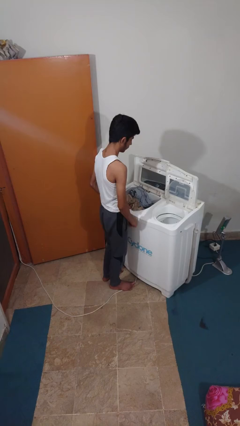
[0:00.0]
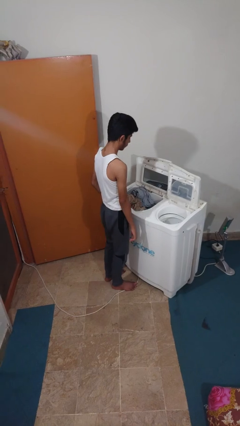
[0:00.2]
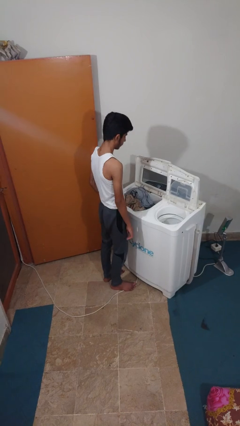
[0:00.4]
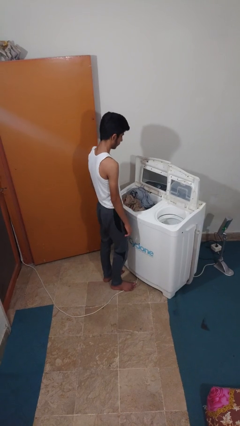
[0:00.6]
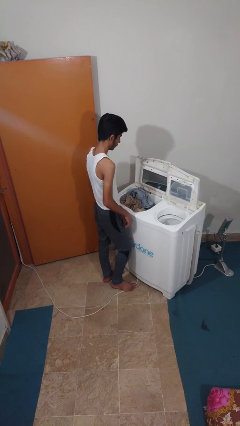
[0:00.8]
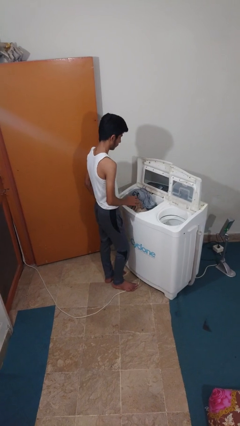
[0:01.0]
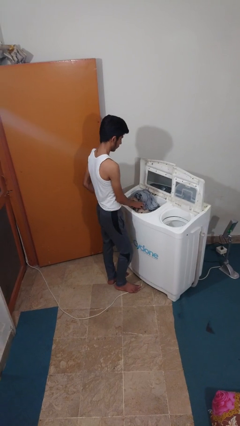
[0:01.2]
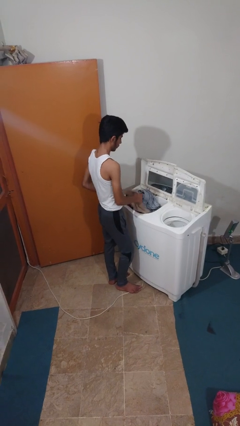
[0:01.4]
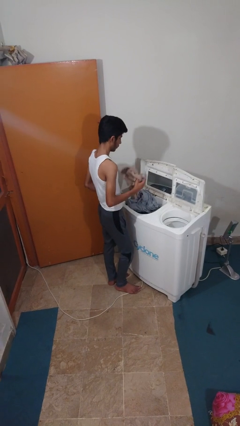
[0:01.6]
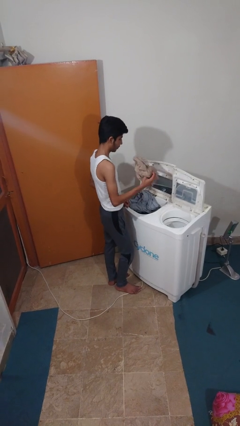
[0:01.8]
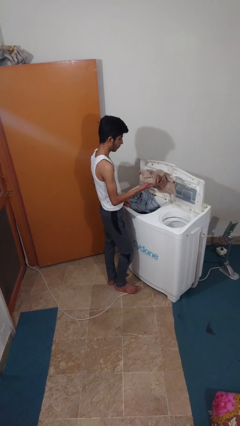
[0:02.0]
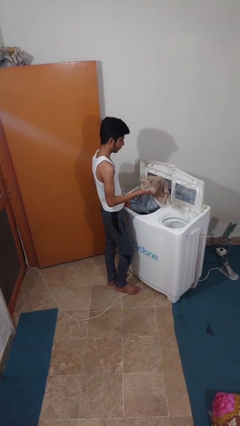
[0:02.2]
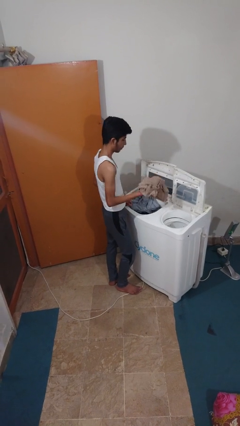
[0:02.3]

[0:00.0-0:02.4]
person unloads clotheswasher

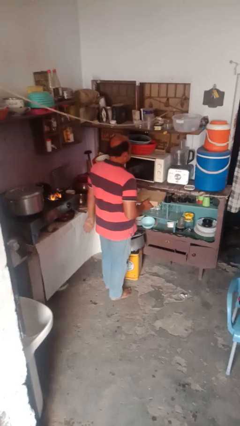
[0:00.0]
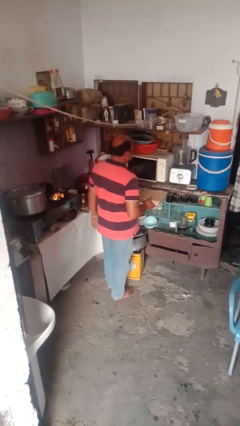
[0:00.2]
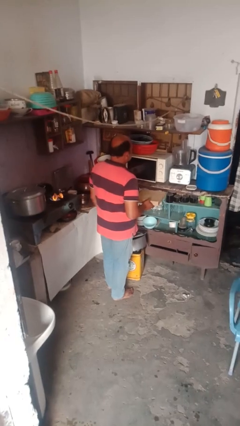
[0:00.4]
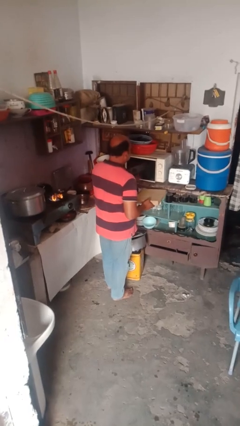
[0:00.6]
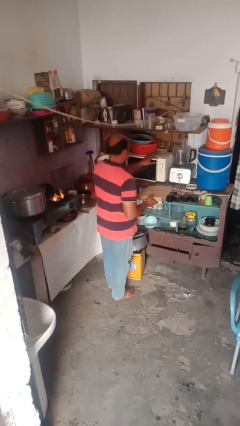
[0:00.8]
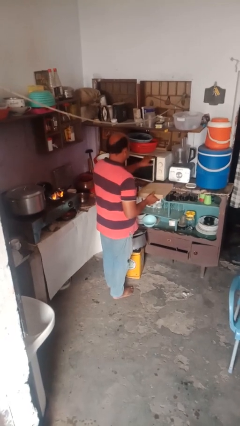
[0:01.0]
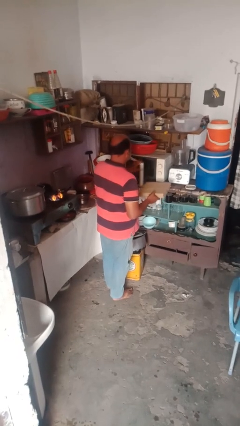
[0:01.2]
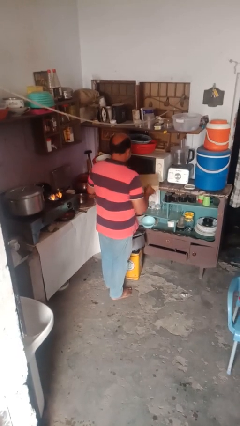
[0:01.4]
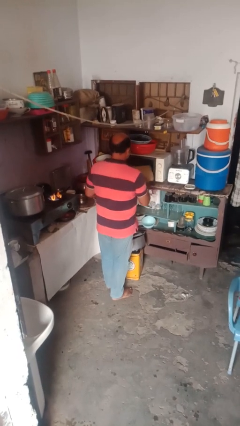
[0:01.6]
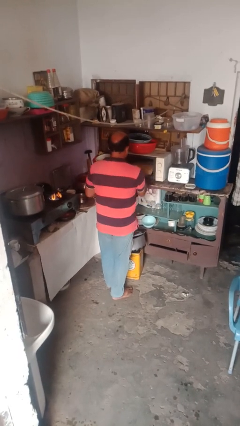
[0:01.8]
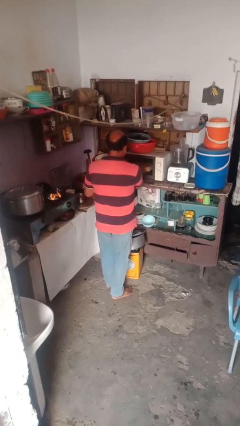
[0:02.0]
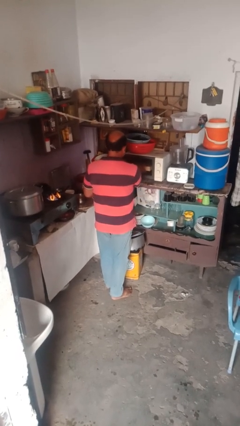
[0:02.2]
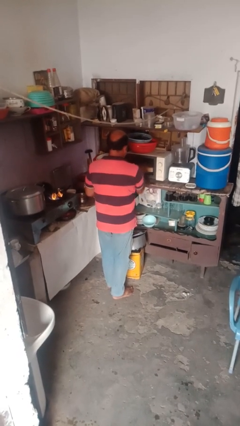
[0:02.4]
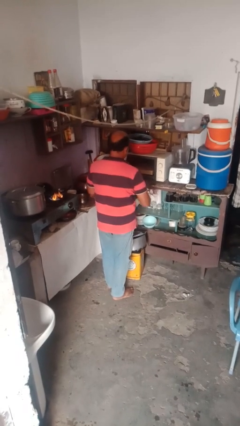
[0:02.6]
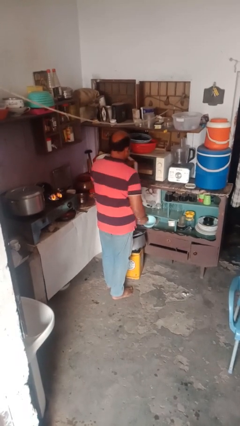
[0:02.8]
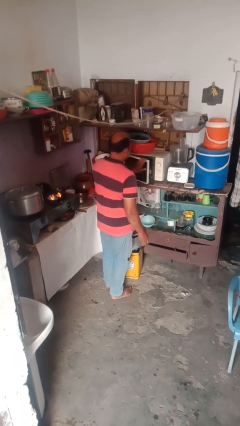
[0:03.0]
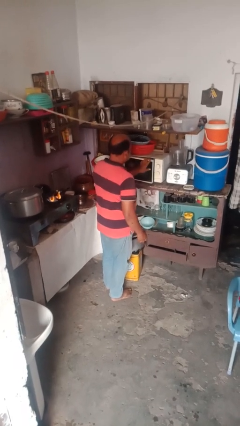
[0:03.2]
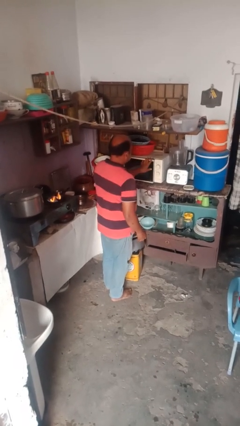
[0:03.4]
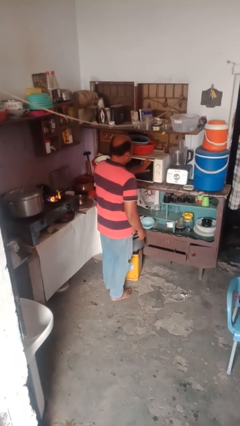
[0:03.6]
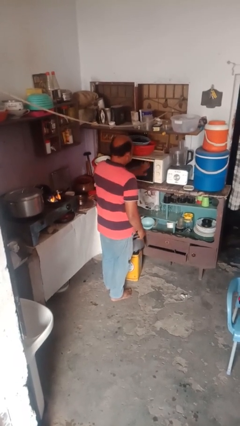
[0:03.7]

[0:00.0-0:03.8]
person puts object into microwave

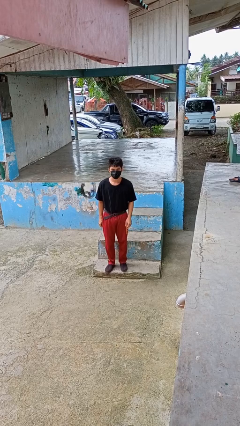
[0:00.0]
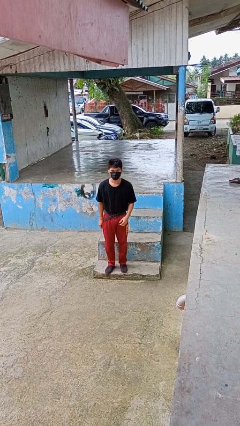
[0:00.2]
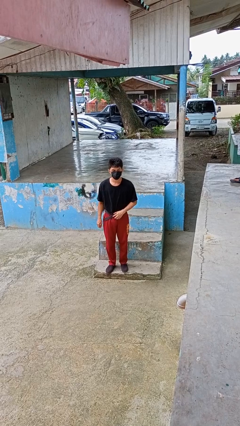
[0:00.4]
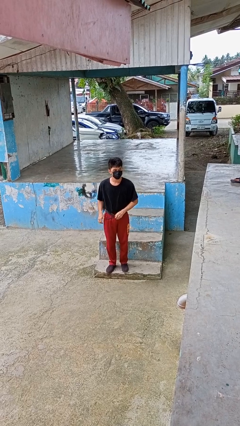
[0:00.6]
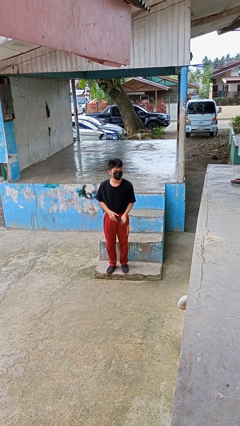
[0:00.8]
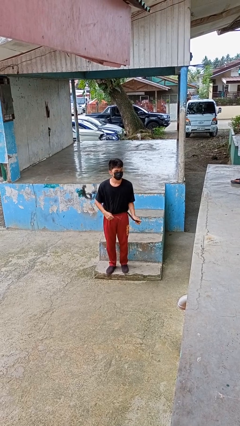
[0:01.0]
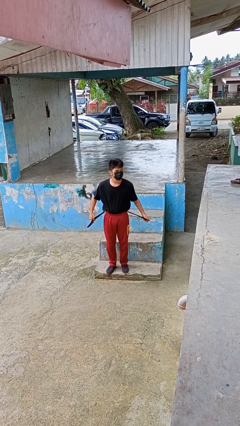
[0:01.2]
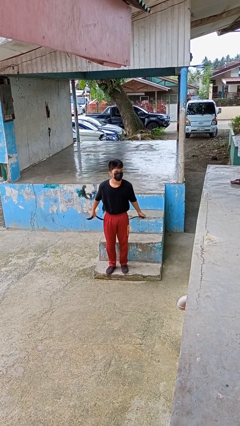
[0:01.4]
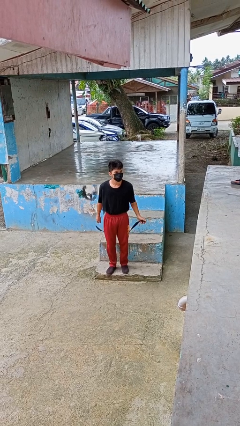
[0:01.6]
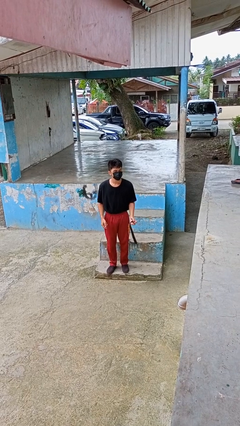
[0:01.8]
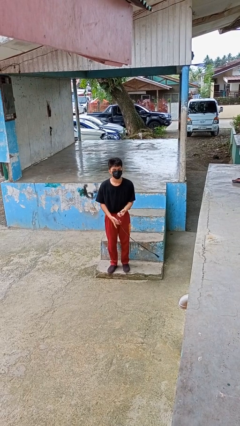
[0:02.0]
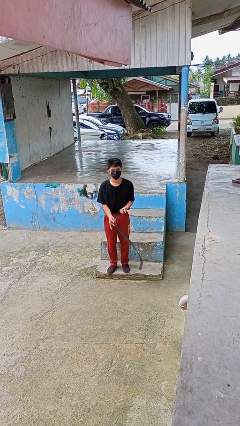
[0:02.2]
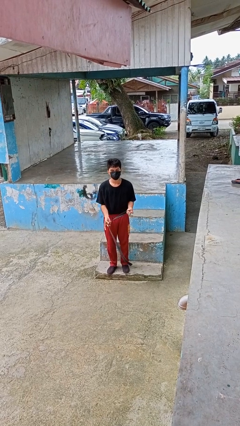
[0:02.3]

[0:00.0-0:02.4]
person takes off belt

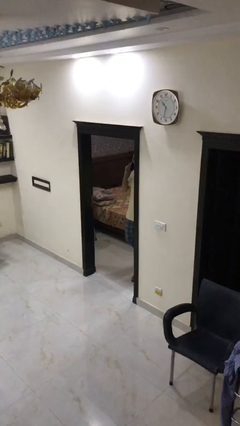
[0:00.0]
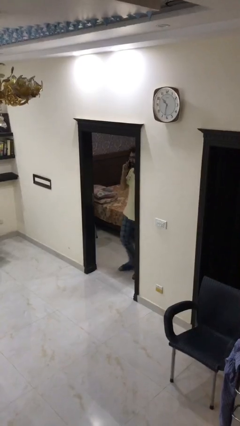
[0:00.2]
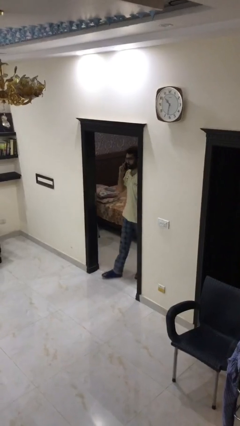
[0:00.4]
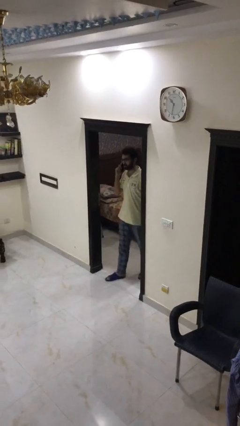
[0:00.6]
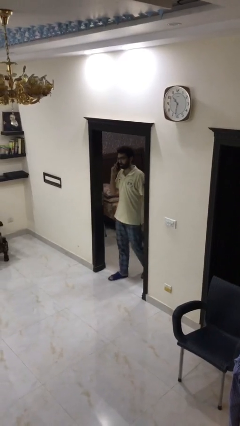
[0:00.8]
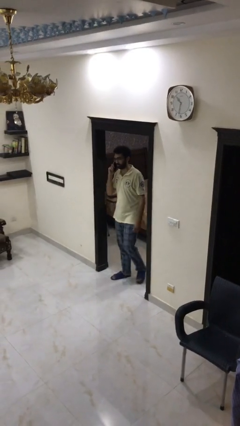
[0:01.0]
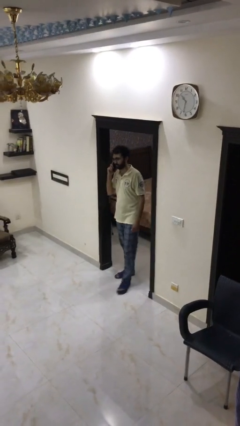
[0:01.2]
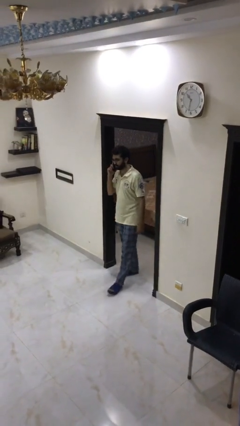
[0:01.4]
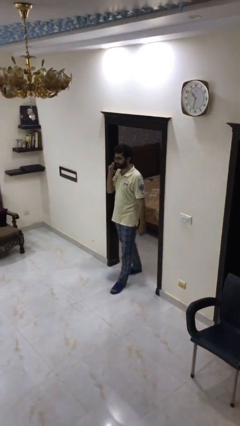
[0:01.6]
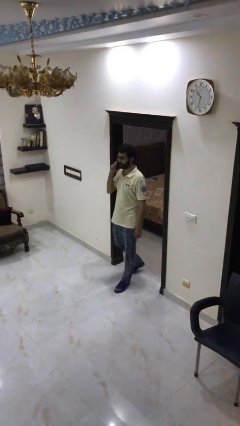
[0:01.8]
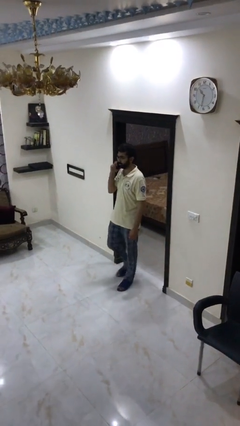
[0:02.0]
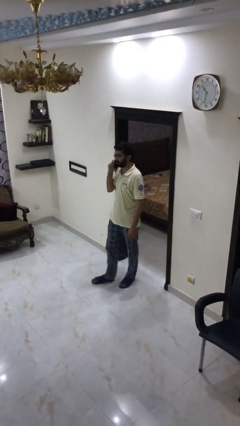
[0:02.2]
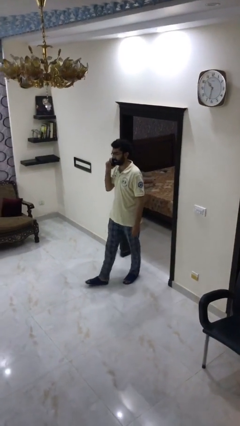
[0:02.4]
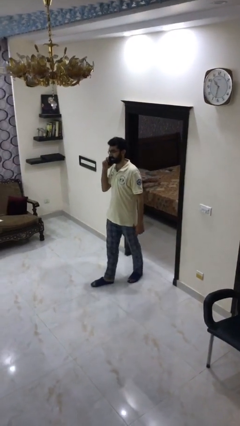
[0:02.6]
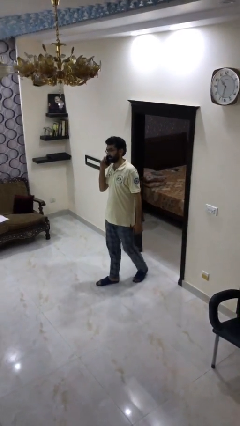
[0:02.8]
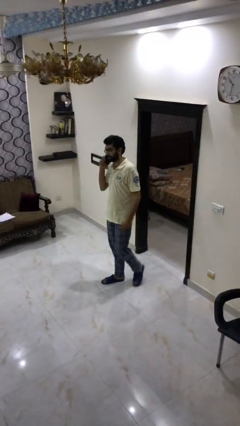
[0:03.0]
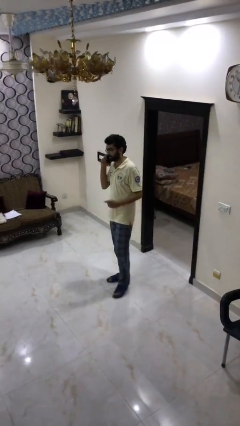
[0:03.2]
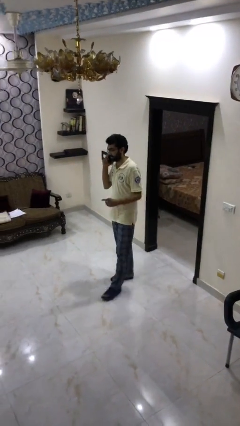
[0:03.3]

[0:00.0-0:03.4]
person enters scene through structure

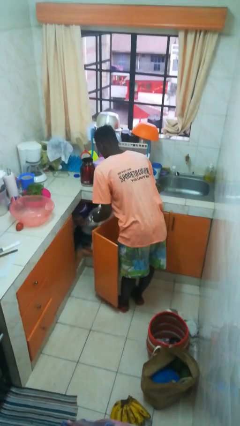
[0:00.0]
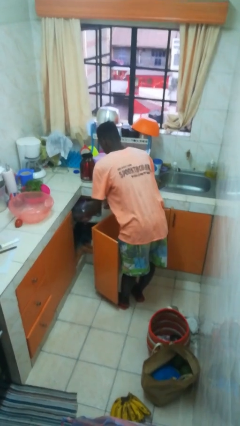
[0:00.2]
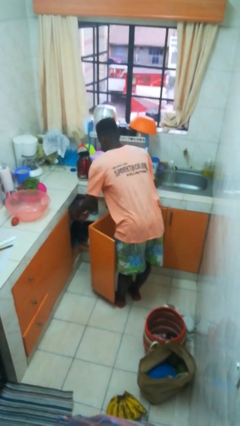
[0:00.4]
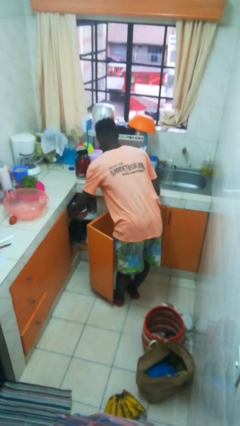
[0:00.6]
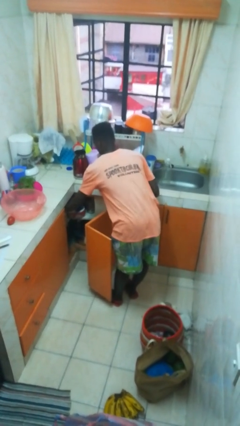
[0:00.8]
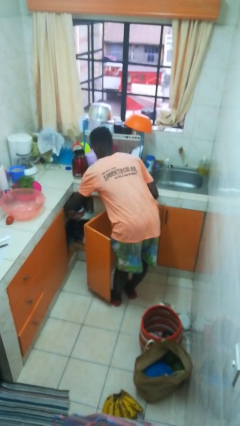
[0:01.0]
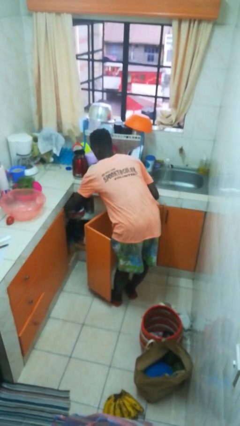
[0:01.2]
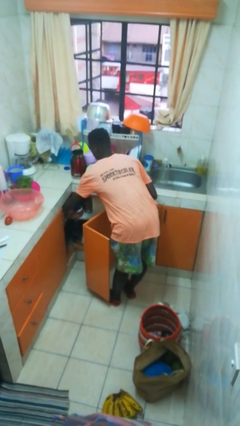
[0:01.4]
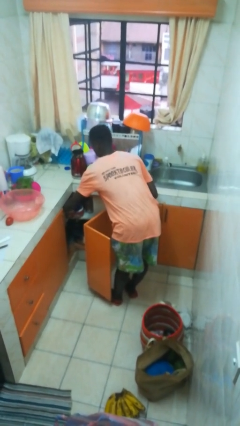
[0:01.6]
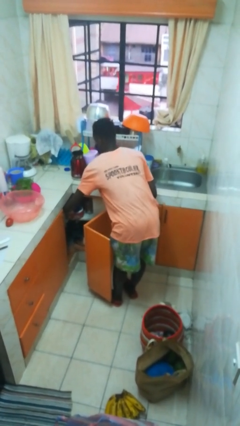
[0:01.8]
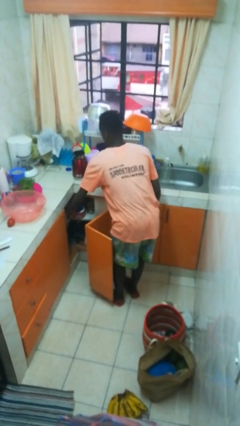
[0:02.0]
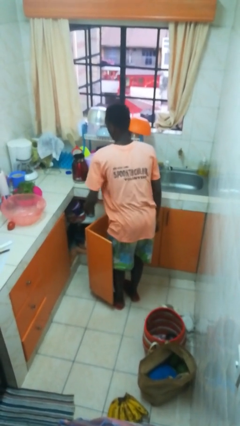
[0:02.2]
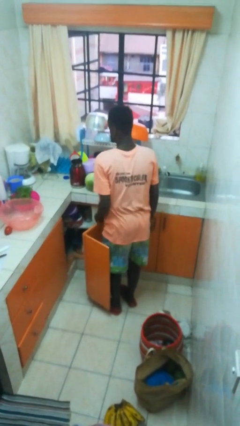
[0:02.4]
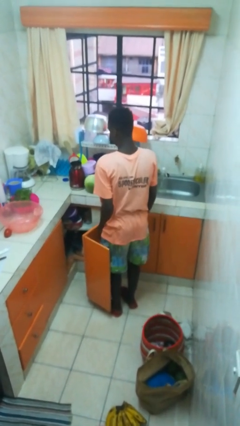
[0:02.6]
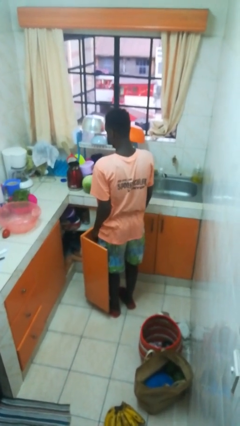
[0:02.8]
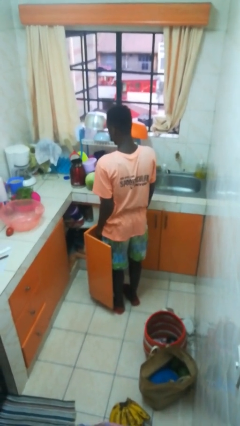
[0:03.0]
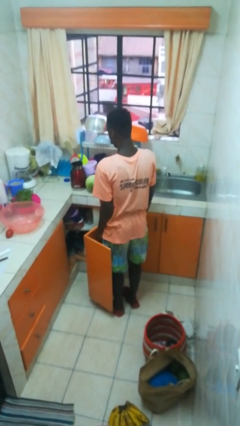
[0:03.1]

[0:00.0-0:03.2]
person puts object in cabinet

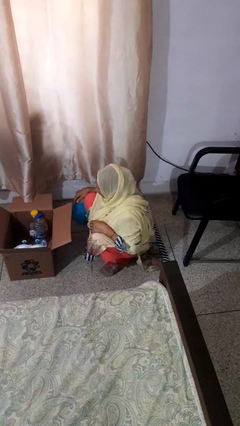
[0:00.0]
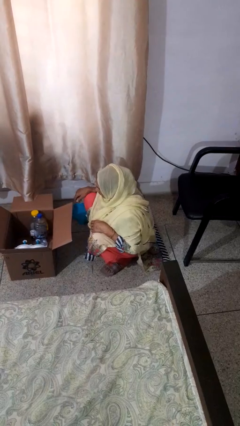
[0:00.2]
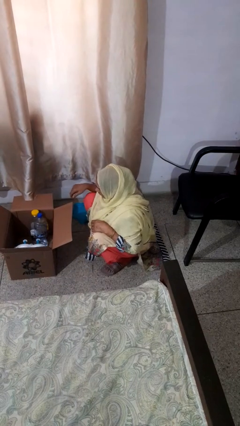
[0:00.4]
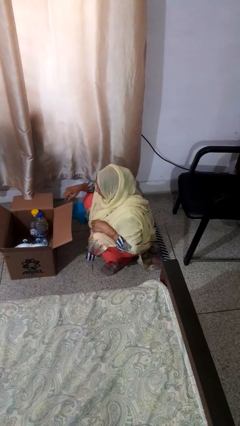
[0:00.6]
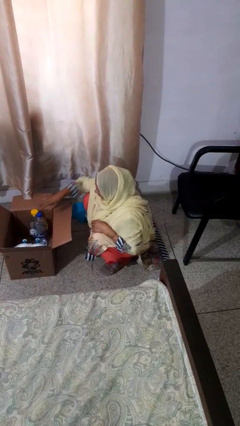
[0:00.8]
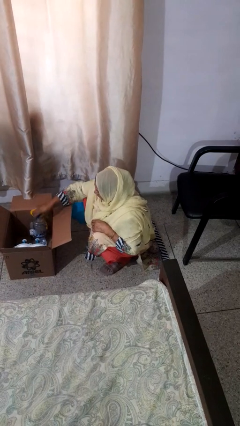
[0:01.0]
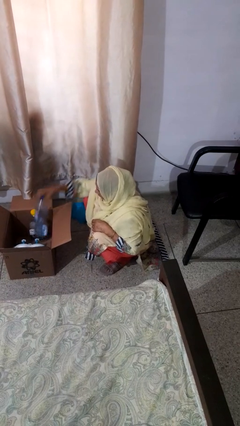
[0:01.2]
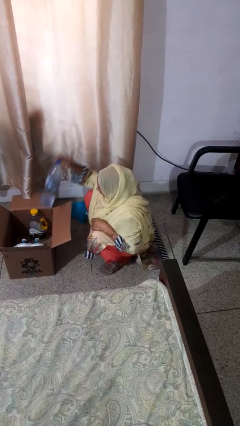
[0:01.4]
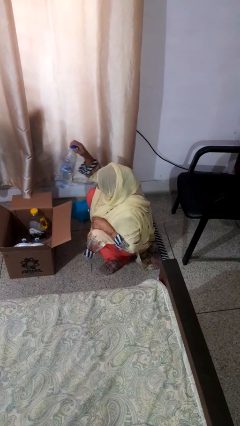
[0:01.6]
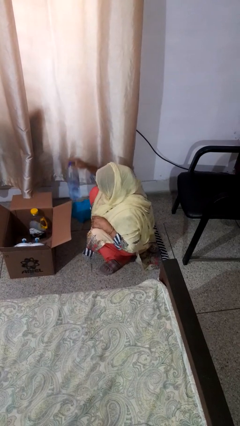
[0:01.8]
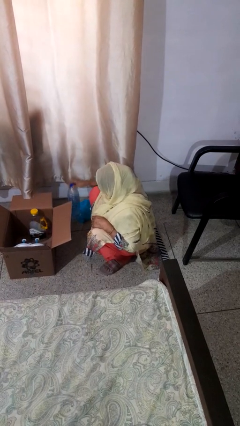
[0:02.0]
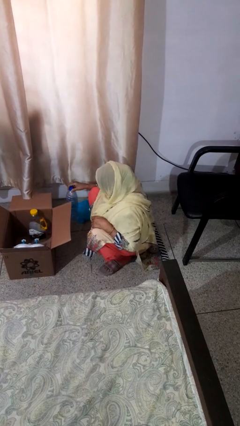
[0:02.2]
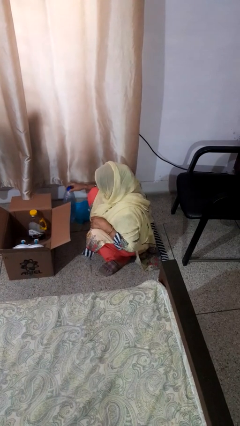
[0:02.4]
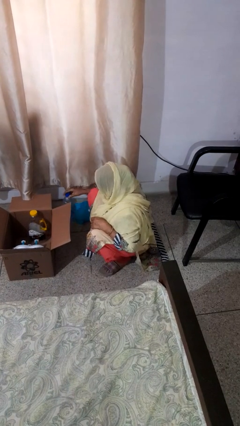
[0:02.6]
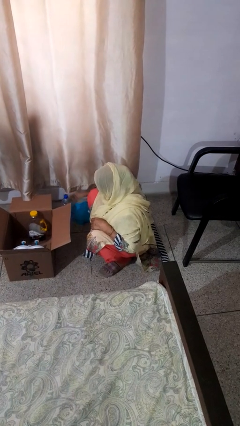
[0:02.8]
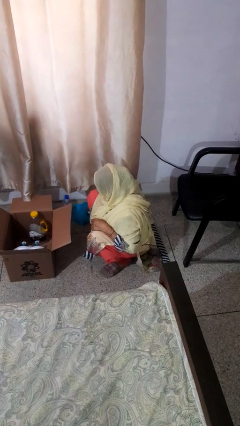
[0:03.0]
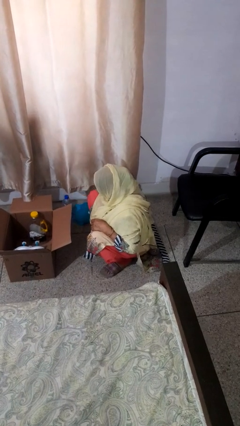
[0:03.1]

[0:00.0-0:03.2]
person takes object from box
